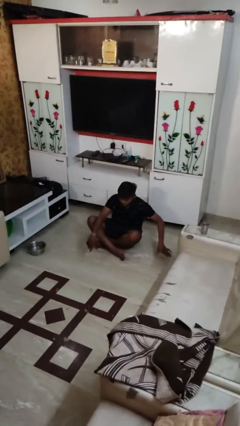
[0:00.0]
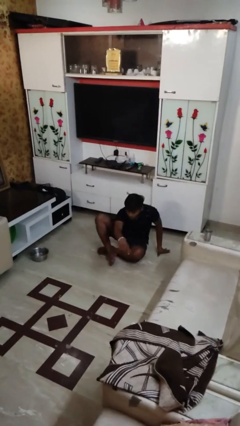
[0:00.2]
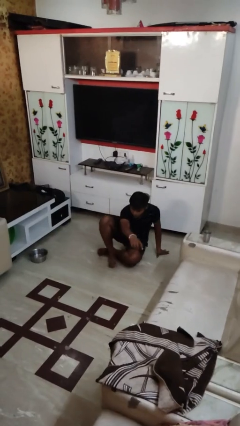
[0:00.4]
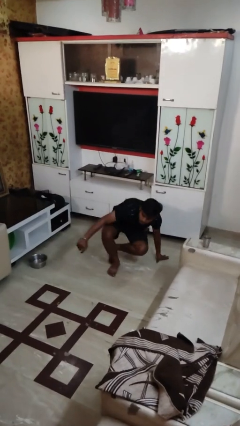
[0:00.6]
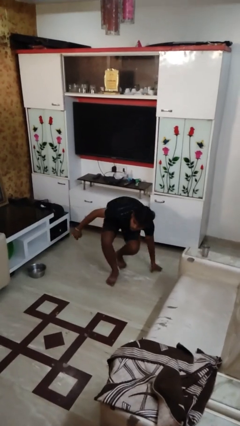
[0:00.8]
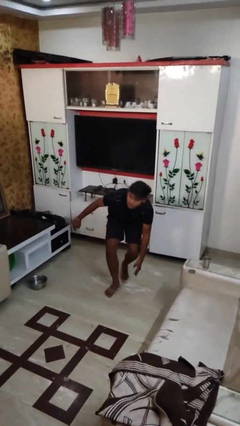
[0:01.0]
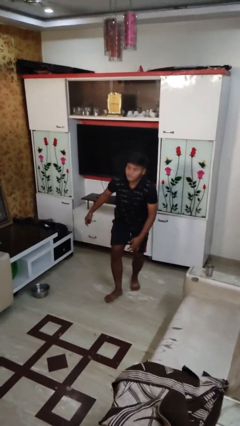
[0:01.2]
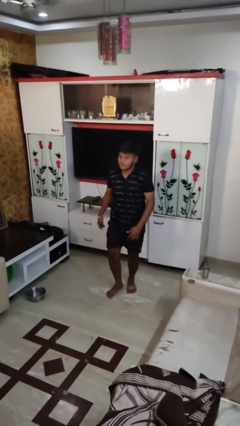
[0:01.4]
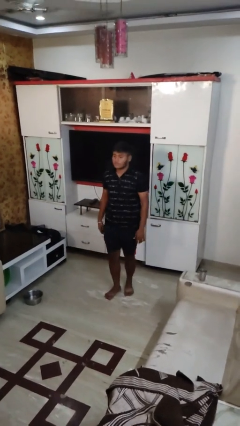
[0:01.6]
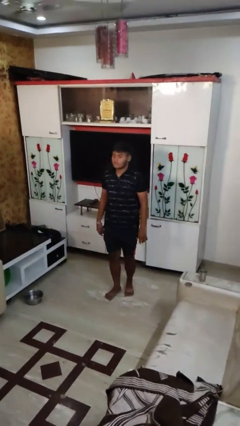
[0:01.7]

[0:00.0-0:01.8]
person stands up from floor

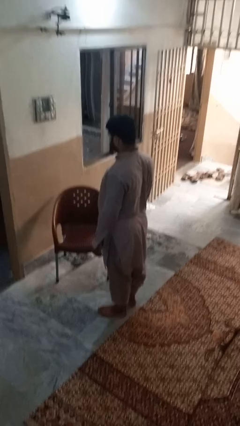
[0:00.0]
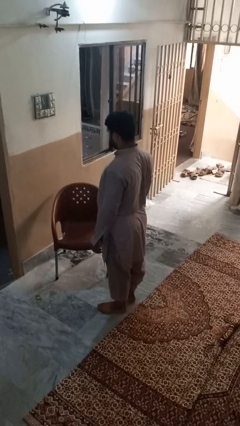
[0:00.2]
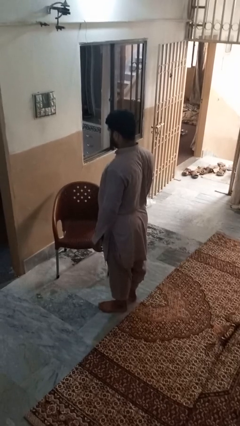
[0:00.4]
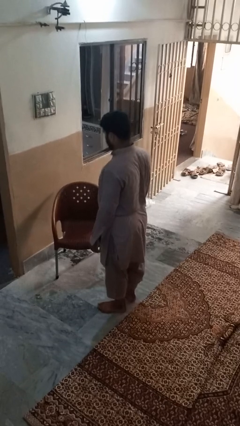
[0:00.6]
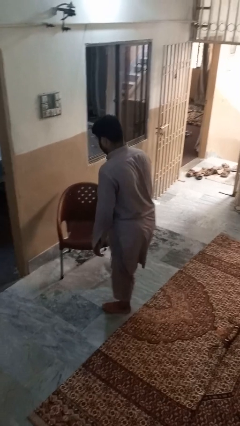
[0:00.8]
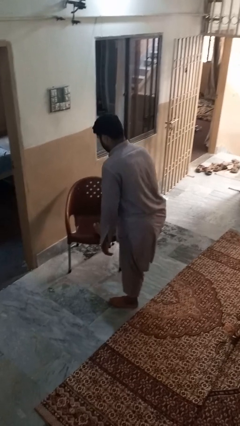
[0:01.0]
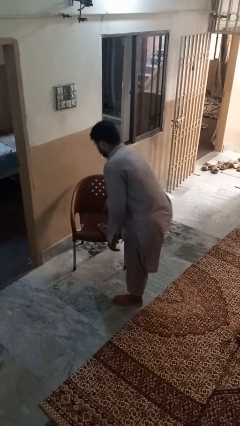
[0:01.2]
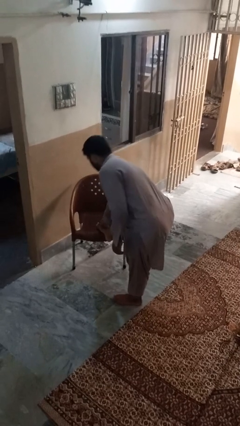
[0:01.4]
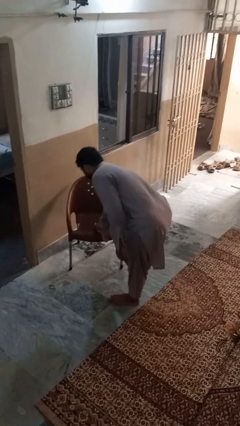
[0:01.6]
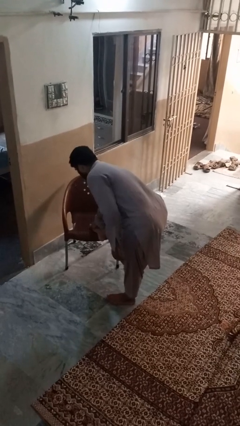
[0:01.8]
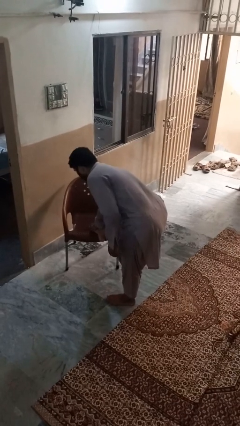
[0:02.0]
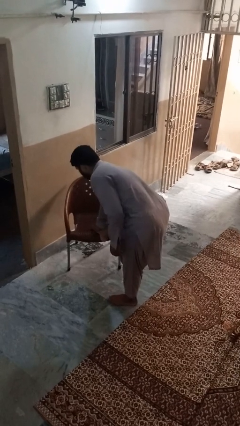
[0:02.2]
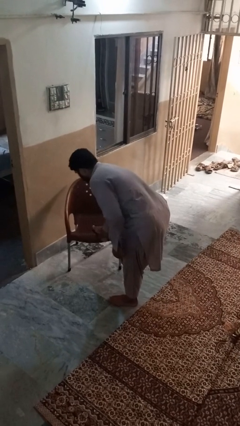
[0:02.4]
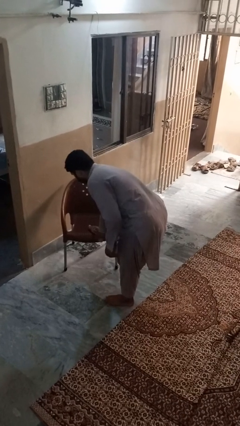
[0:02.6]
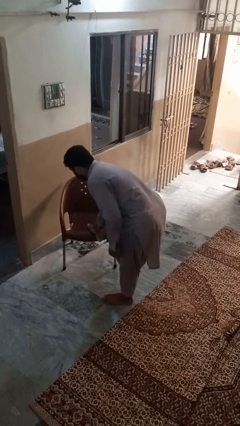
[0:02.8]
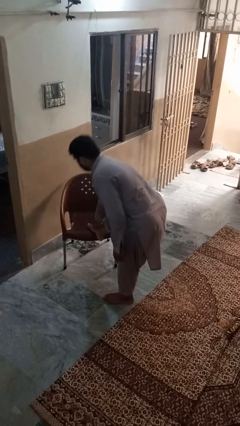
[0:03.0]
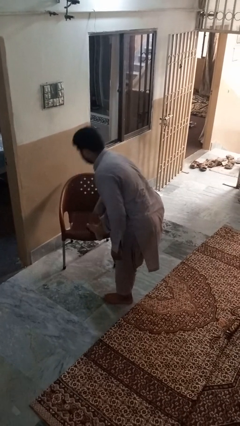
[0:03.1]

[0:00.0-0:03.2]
person stubs toe

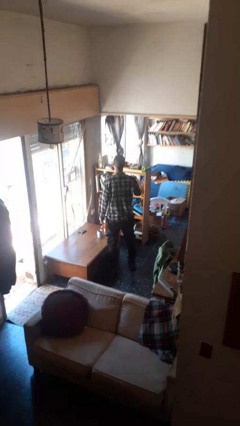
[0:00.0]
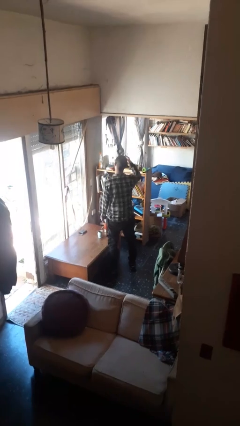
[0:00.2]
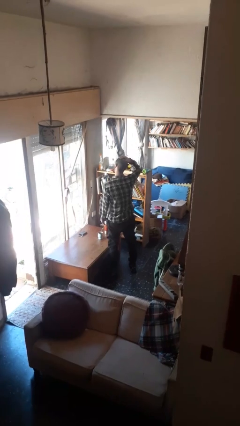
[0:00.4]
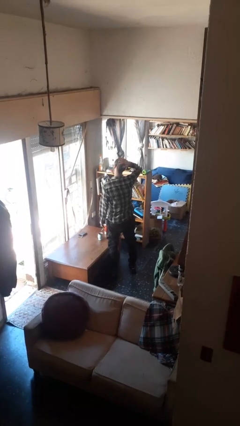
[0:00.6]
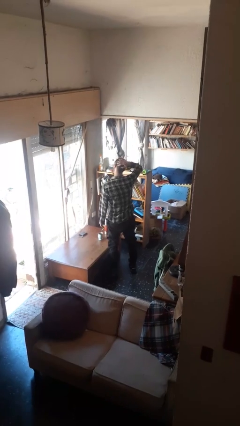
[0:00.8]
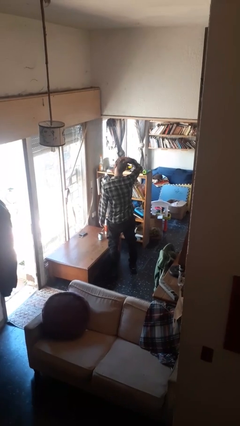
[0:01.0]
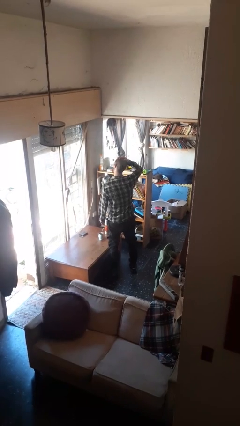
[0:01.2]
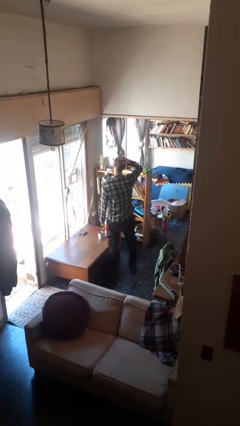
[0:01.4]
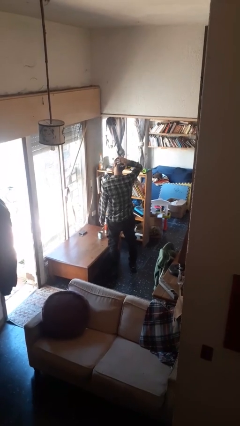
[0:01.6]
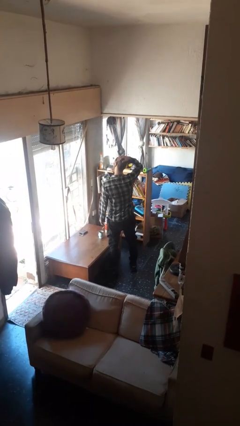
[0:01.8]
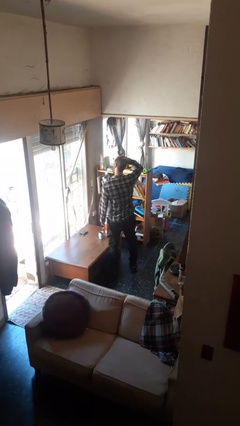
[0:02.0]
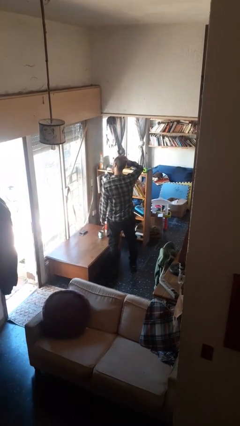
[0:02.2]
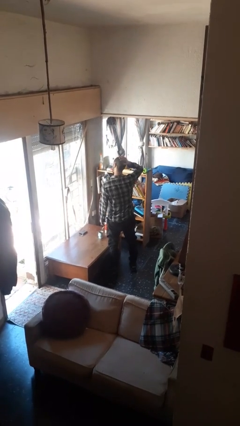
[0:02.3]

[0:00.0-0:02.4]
person pats head

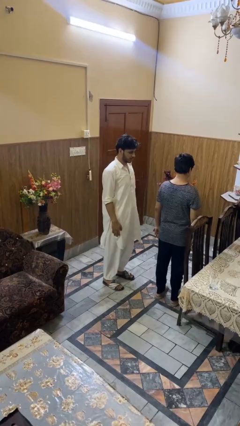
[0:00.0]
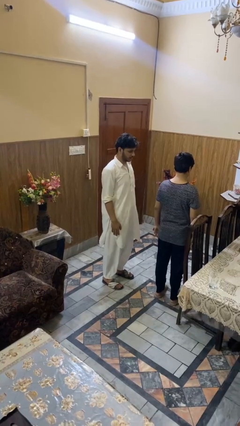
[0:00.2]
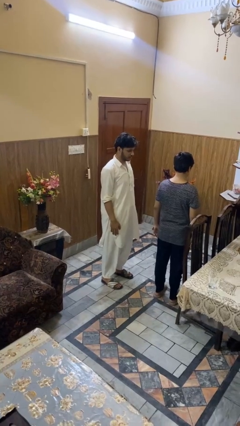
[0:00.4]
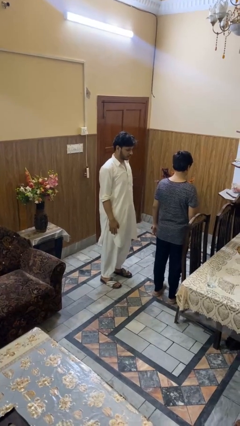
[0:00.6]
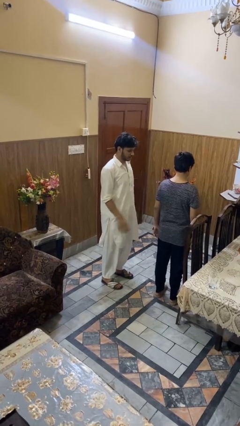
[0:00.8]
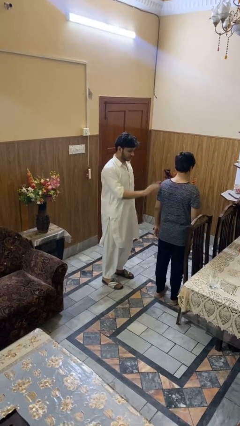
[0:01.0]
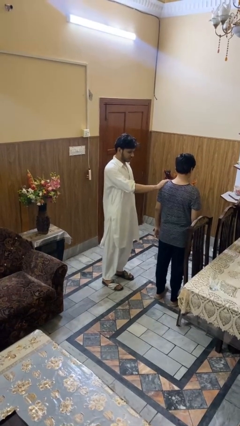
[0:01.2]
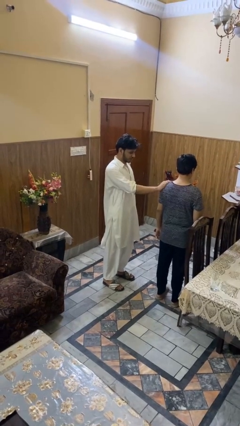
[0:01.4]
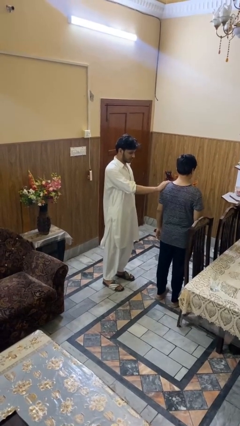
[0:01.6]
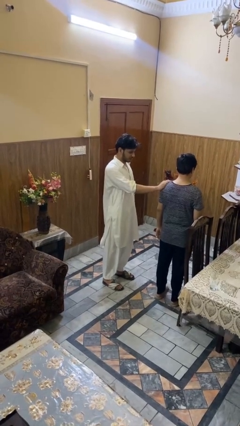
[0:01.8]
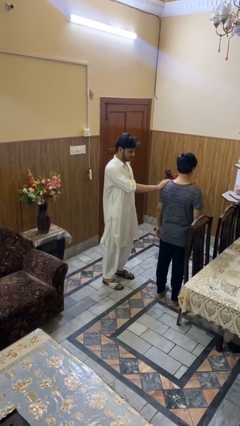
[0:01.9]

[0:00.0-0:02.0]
person grabs person by shoulder

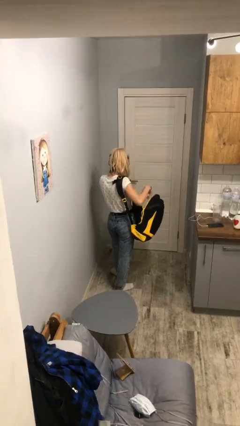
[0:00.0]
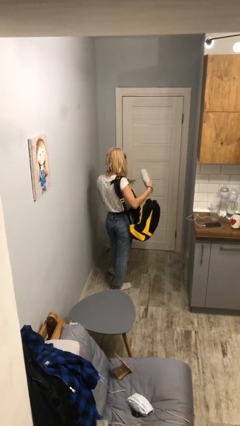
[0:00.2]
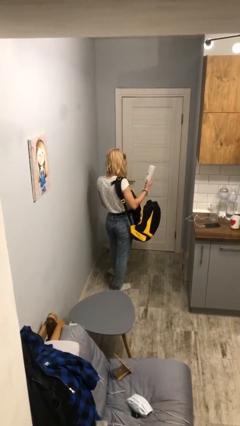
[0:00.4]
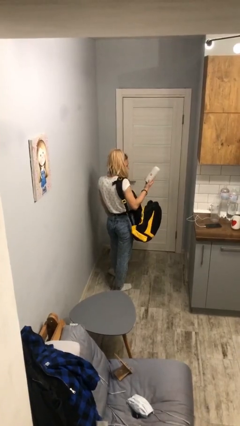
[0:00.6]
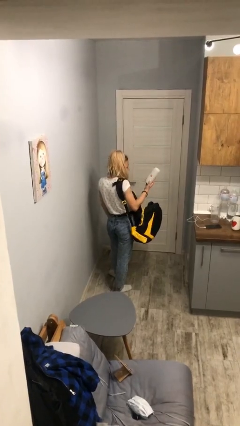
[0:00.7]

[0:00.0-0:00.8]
person takes object from backpack

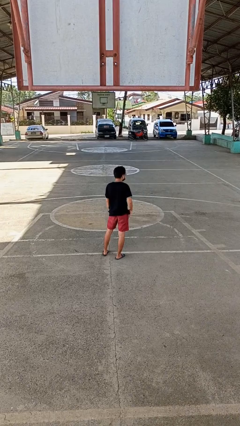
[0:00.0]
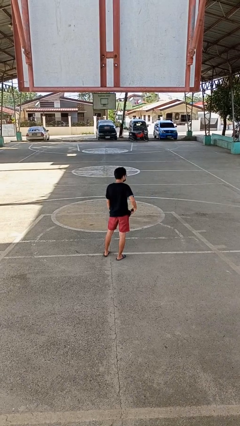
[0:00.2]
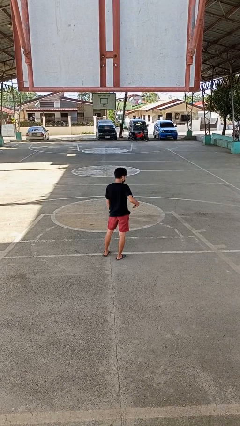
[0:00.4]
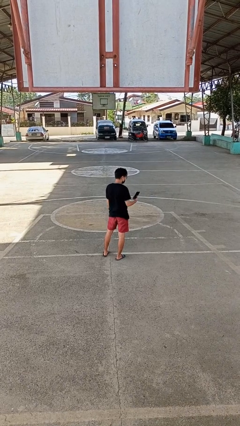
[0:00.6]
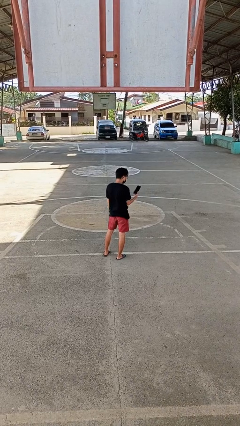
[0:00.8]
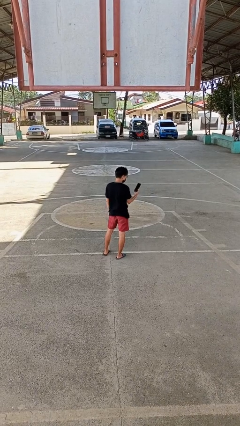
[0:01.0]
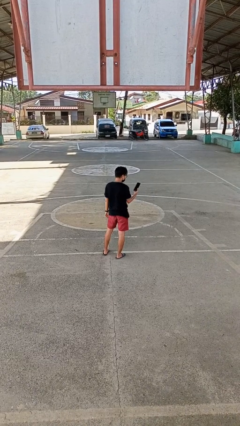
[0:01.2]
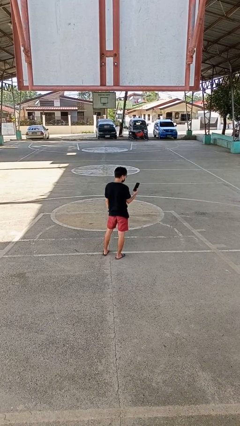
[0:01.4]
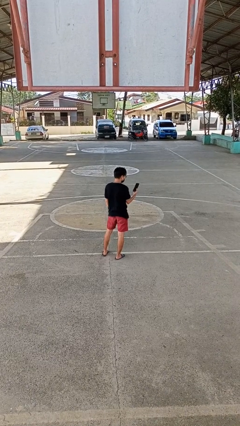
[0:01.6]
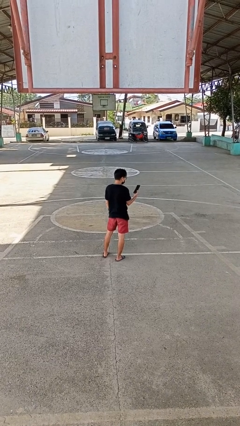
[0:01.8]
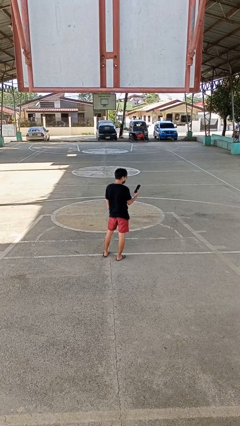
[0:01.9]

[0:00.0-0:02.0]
person takes phone from pocket

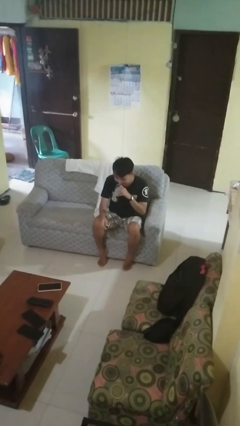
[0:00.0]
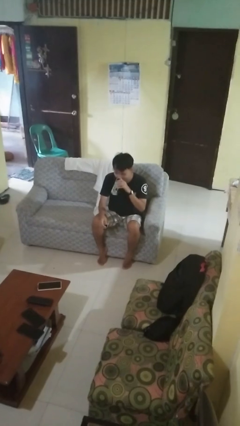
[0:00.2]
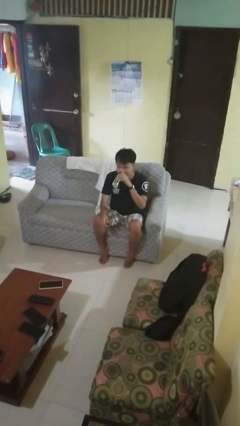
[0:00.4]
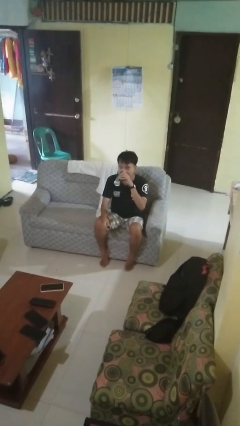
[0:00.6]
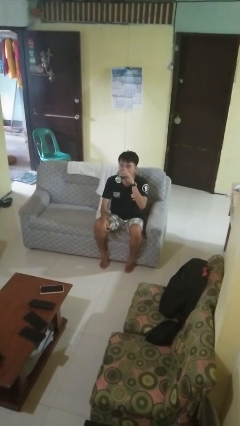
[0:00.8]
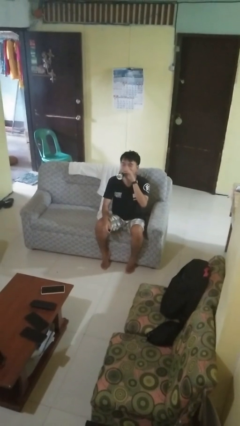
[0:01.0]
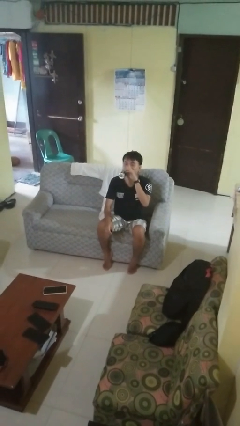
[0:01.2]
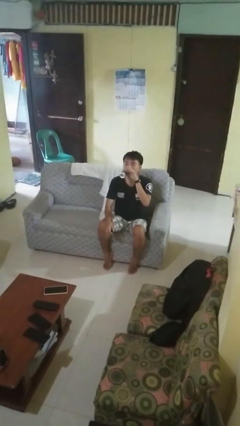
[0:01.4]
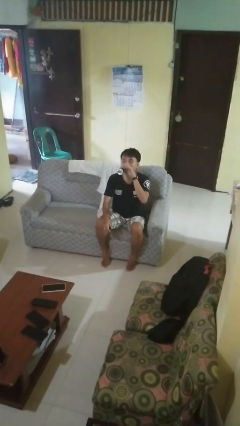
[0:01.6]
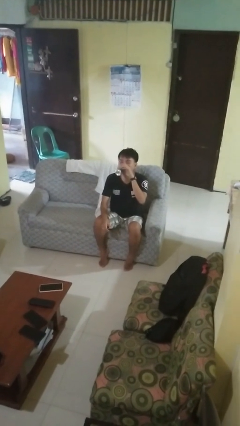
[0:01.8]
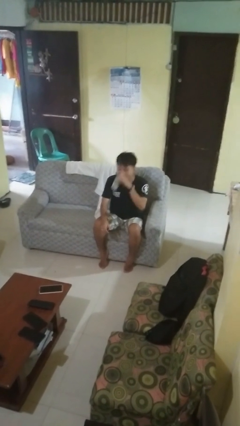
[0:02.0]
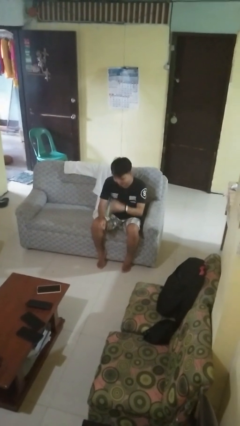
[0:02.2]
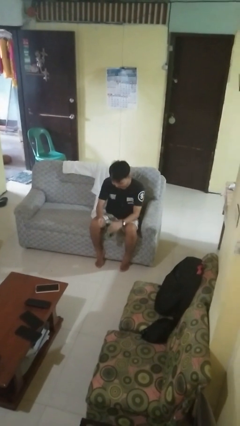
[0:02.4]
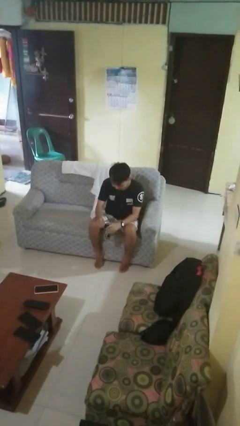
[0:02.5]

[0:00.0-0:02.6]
person drinks from beverage can

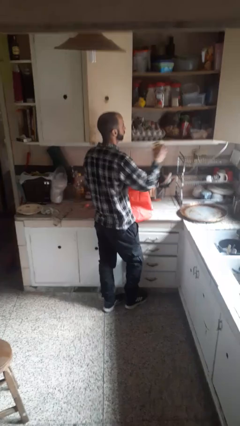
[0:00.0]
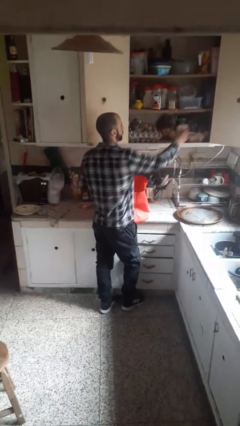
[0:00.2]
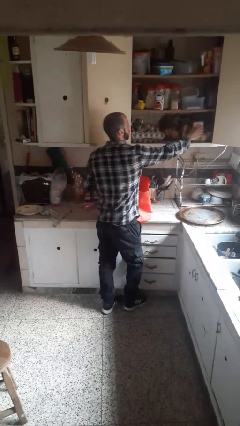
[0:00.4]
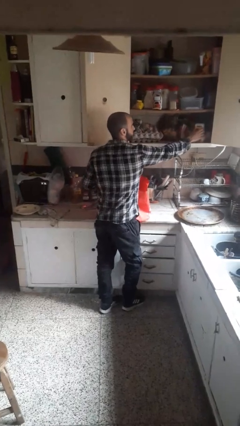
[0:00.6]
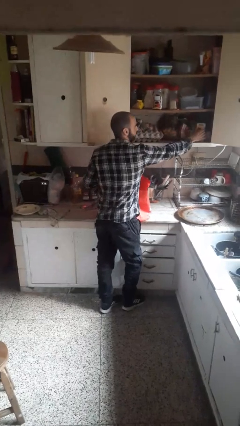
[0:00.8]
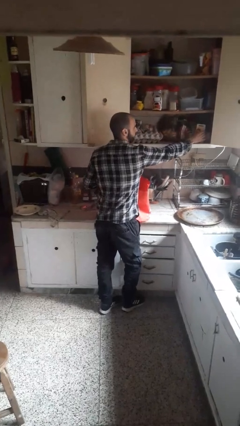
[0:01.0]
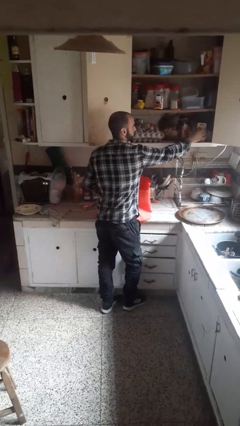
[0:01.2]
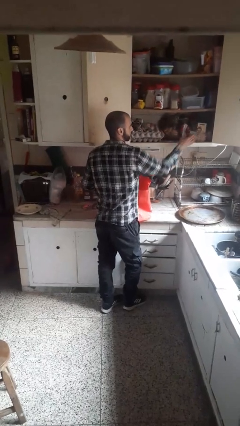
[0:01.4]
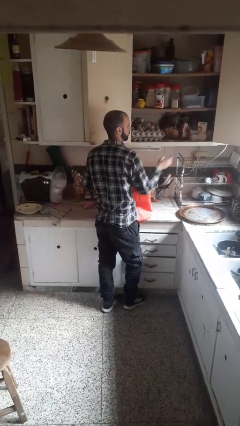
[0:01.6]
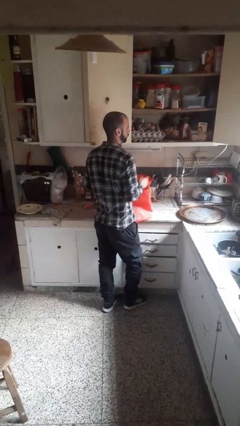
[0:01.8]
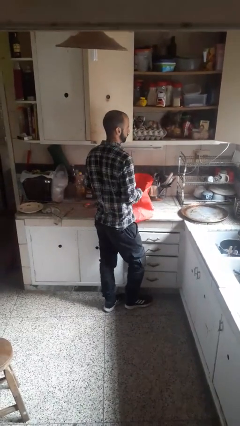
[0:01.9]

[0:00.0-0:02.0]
person loads groceries into cabinet

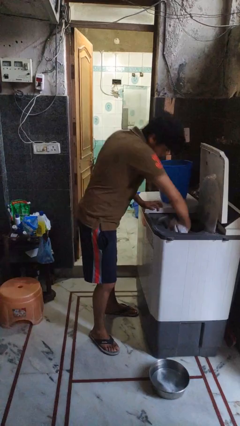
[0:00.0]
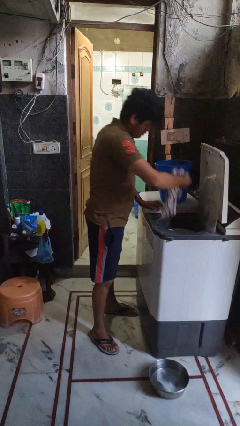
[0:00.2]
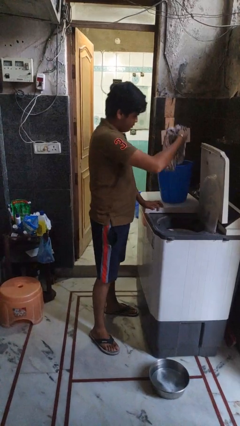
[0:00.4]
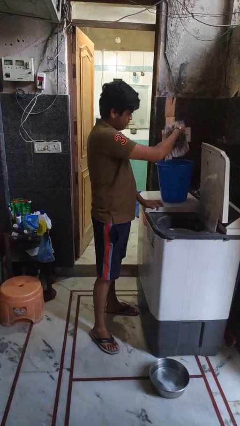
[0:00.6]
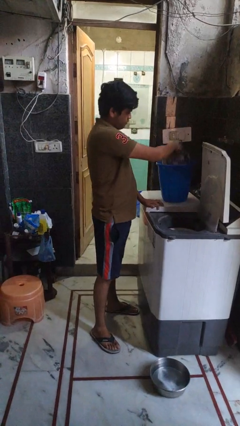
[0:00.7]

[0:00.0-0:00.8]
person unloads dryer
